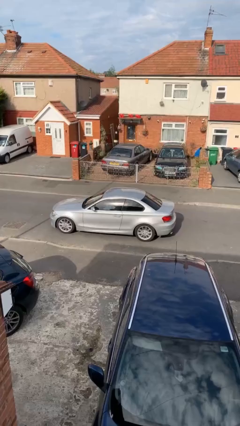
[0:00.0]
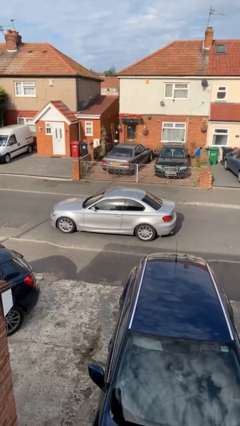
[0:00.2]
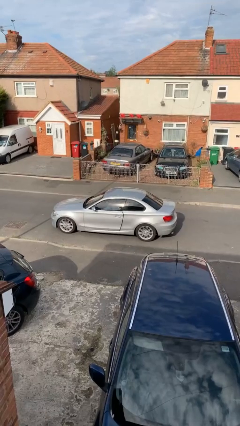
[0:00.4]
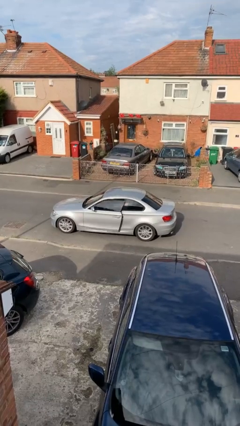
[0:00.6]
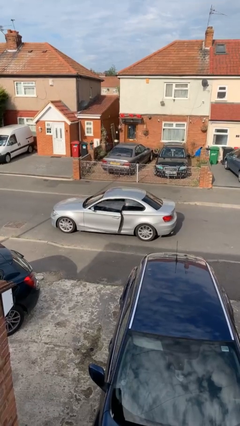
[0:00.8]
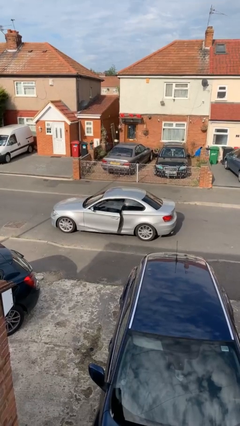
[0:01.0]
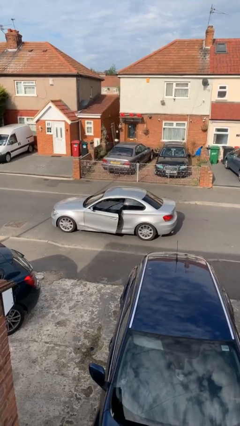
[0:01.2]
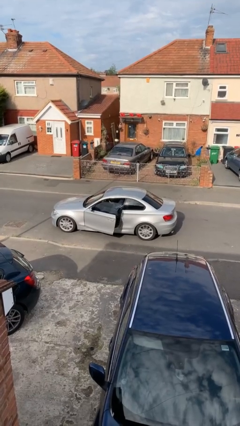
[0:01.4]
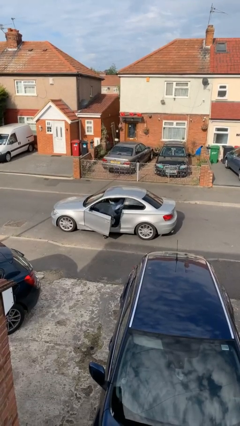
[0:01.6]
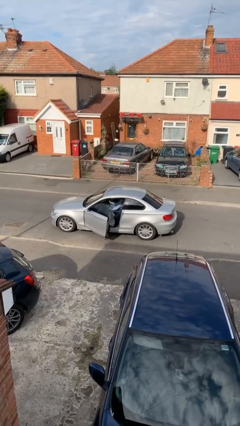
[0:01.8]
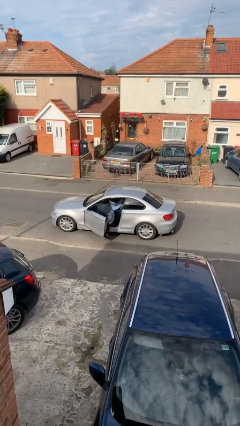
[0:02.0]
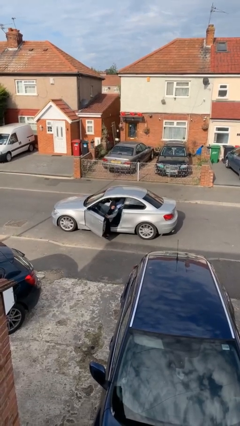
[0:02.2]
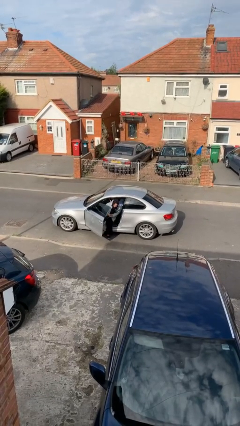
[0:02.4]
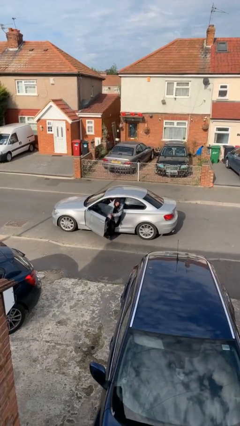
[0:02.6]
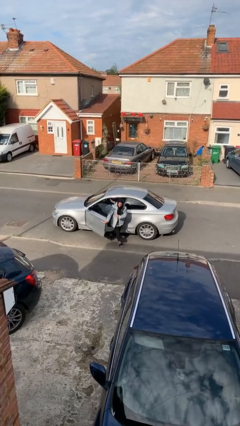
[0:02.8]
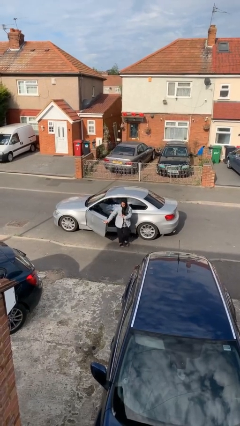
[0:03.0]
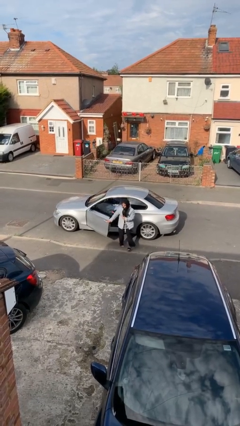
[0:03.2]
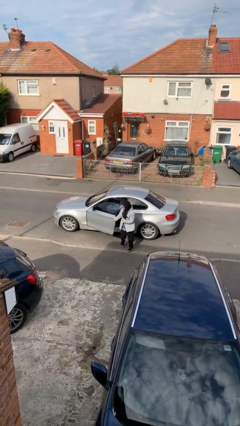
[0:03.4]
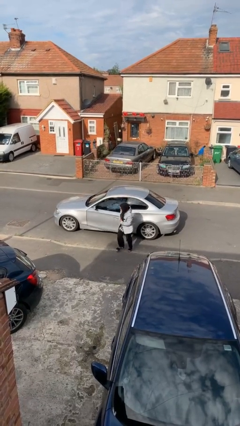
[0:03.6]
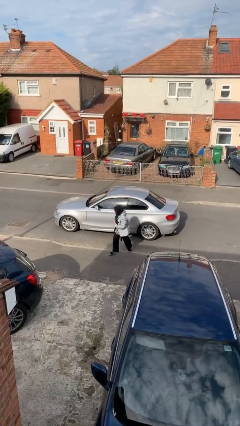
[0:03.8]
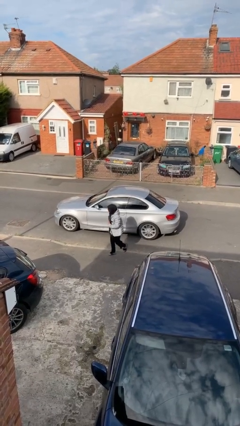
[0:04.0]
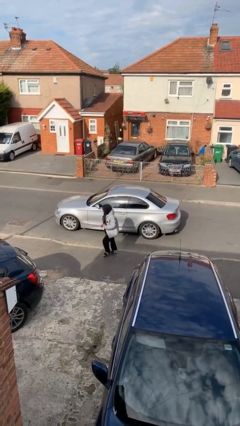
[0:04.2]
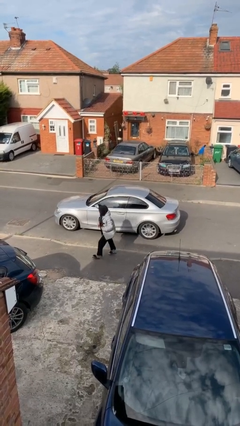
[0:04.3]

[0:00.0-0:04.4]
car drops off person

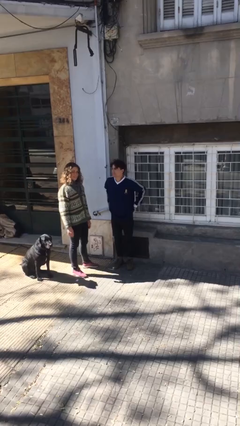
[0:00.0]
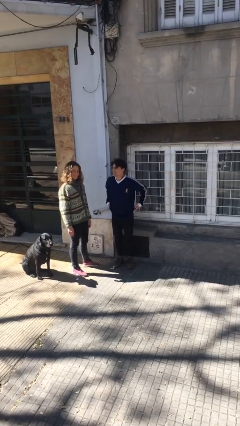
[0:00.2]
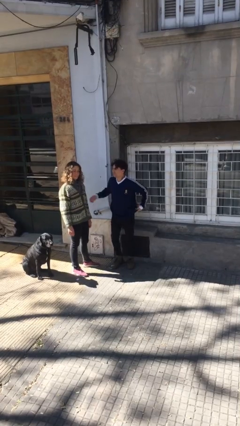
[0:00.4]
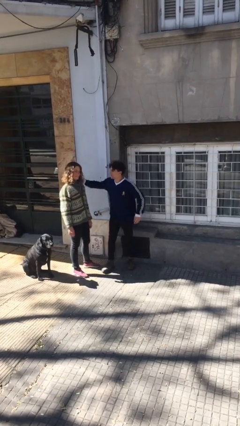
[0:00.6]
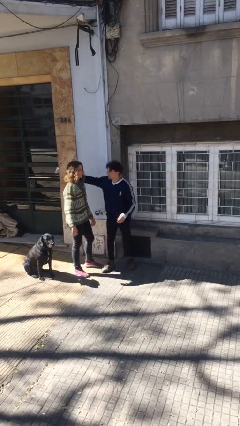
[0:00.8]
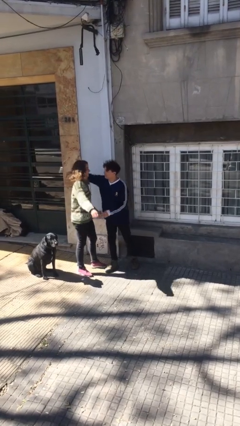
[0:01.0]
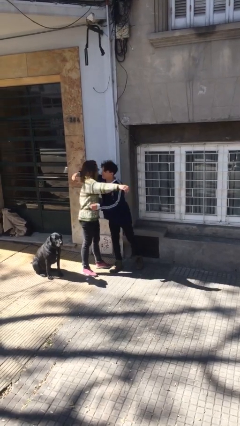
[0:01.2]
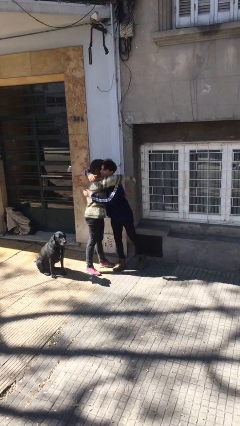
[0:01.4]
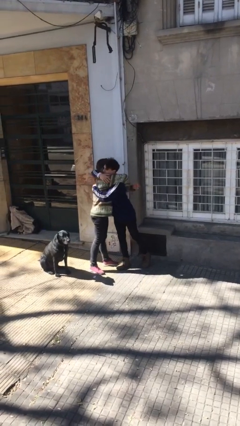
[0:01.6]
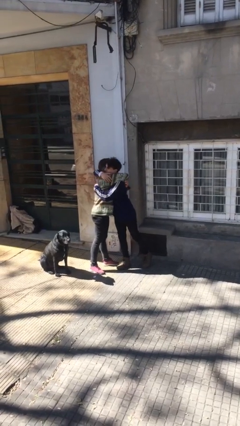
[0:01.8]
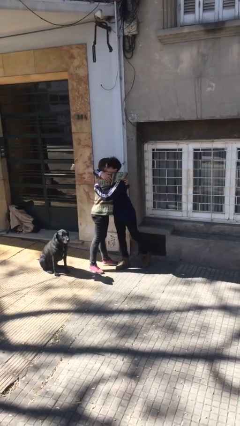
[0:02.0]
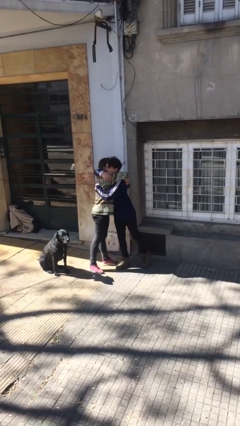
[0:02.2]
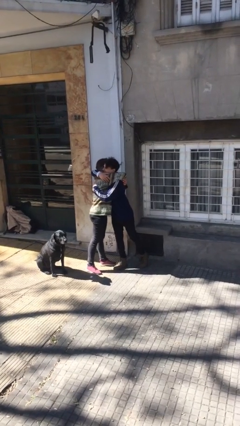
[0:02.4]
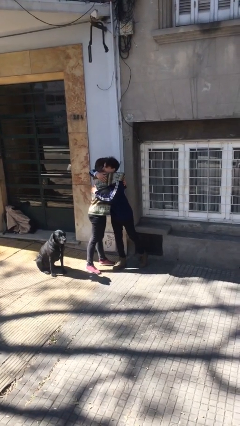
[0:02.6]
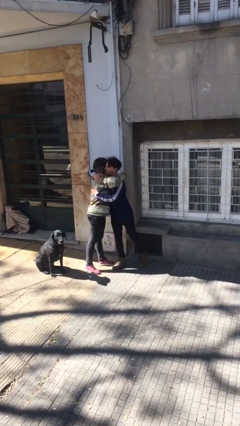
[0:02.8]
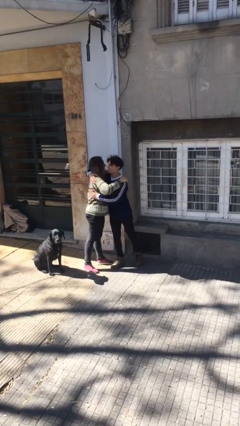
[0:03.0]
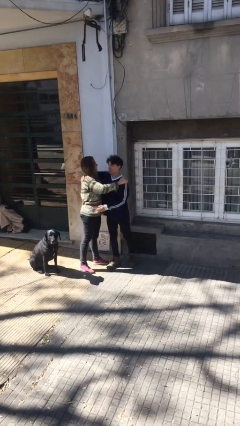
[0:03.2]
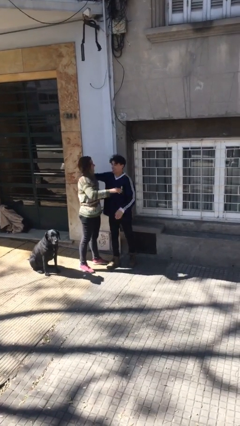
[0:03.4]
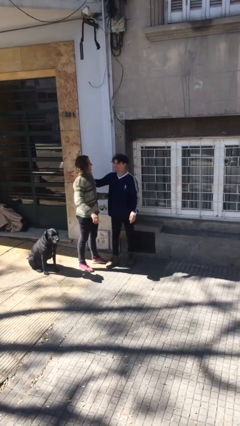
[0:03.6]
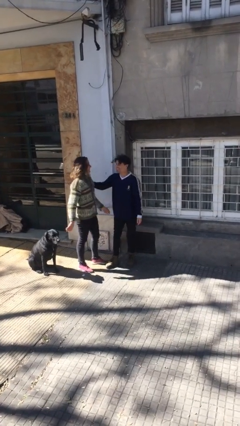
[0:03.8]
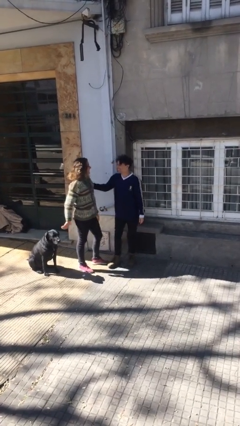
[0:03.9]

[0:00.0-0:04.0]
person embraces person

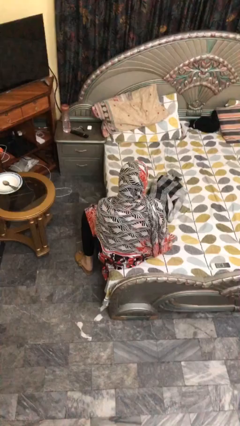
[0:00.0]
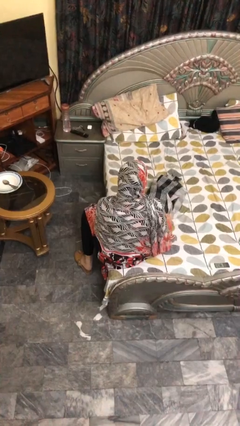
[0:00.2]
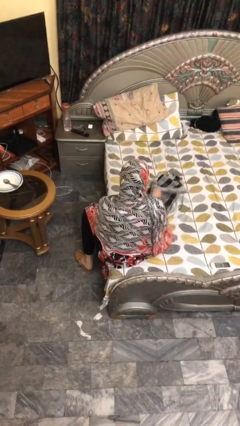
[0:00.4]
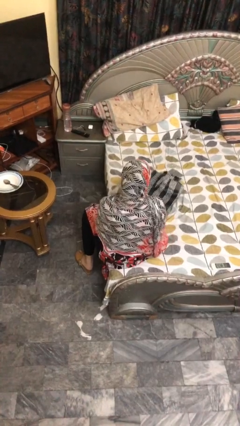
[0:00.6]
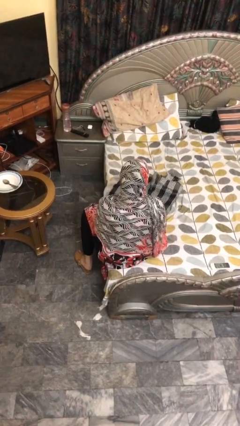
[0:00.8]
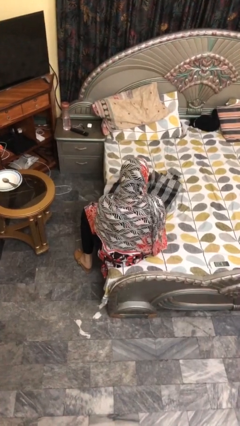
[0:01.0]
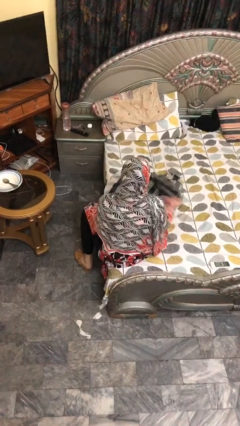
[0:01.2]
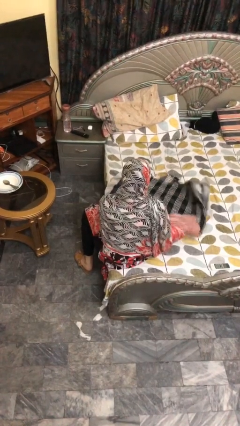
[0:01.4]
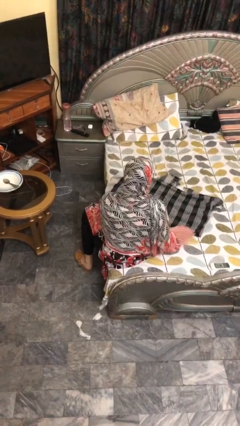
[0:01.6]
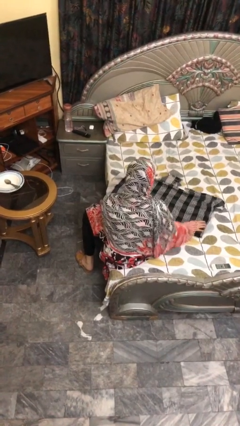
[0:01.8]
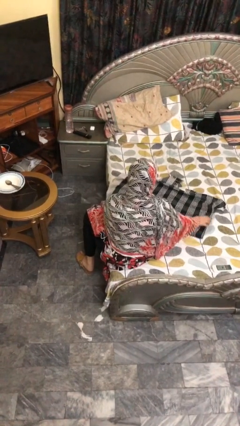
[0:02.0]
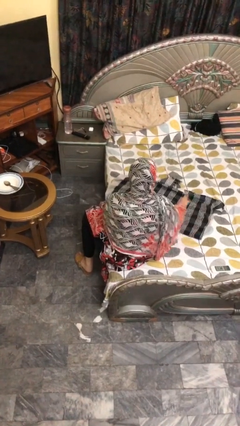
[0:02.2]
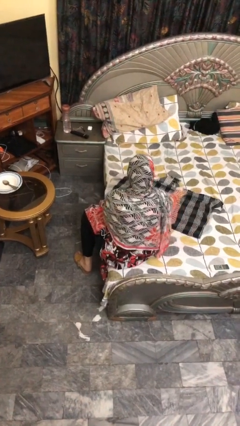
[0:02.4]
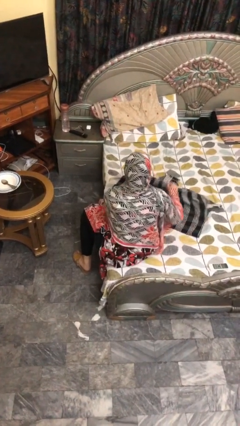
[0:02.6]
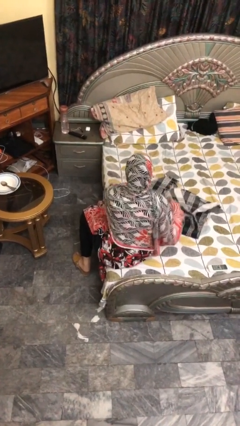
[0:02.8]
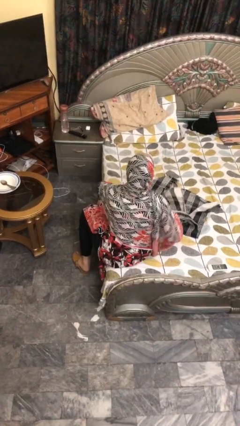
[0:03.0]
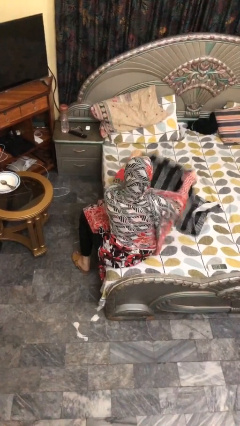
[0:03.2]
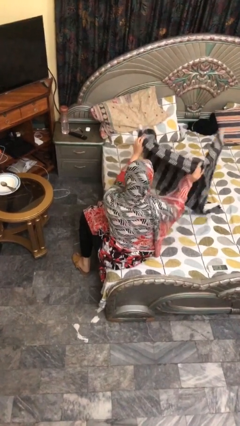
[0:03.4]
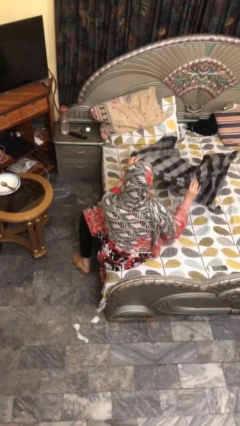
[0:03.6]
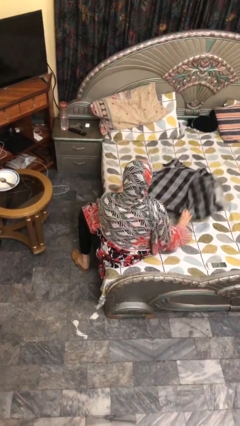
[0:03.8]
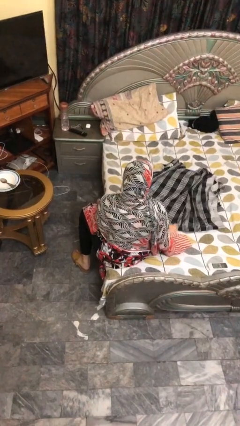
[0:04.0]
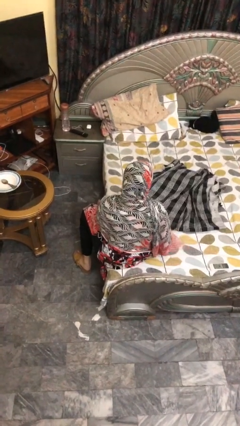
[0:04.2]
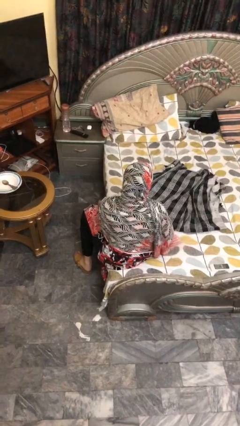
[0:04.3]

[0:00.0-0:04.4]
person unfolds blanket

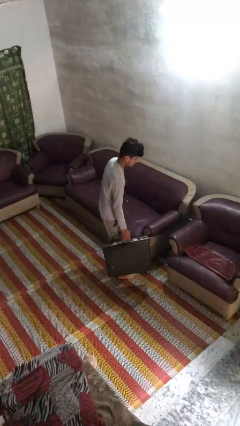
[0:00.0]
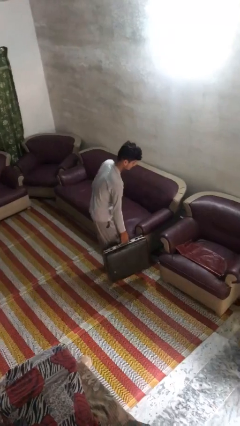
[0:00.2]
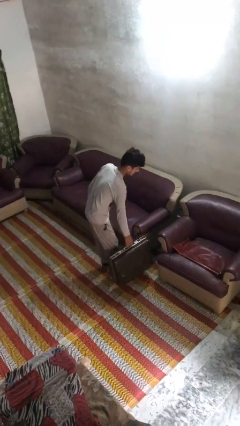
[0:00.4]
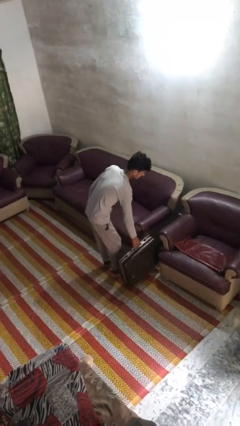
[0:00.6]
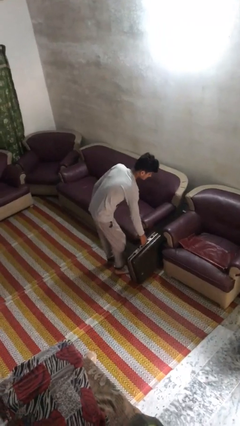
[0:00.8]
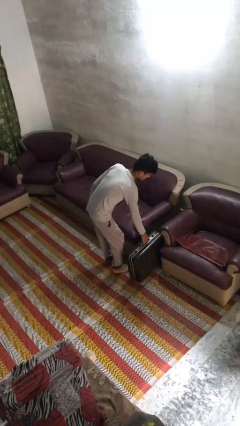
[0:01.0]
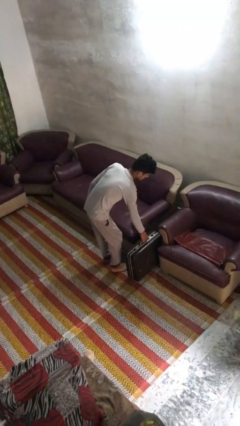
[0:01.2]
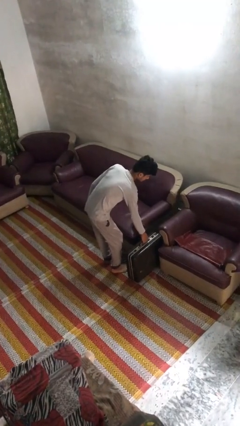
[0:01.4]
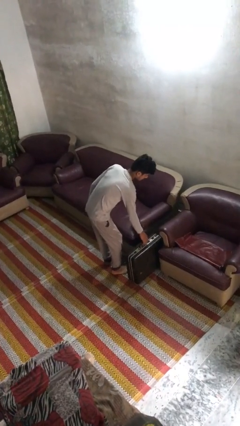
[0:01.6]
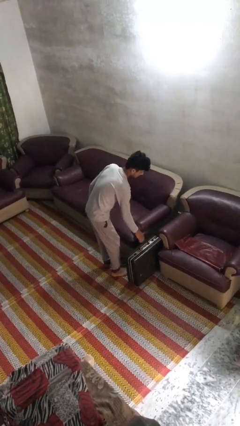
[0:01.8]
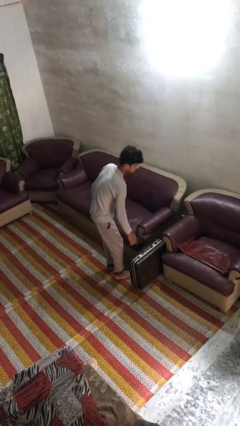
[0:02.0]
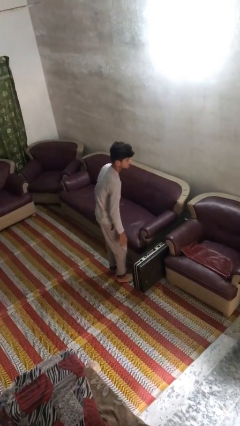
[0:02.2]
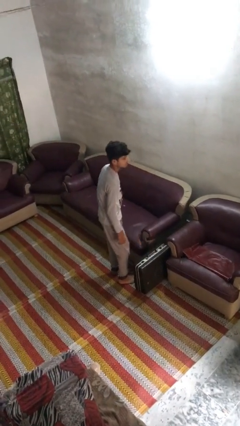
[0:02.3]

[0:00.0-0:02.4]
person puts down object on floor

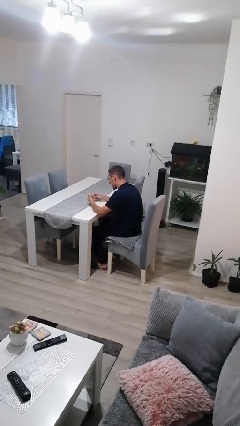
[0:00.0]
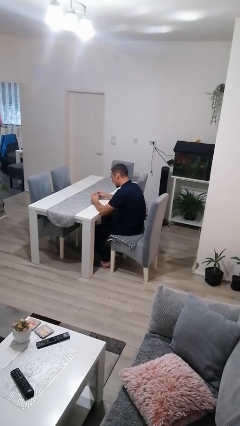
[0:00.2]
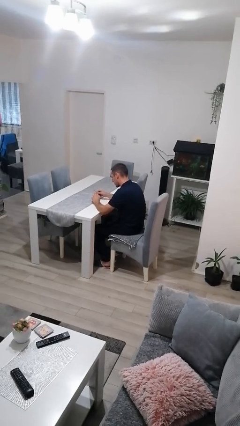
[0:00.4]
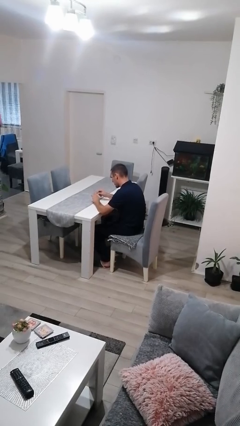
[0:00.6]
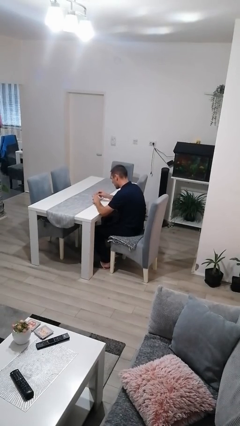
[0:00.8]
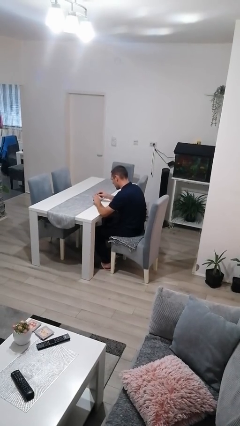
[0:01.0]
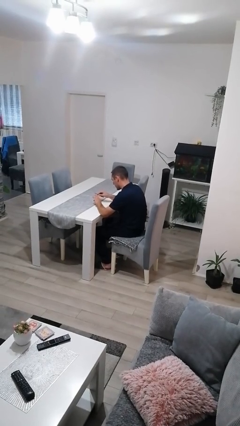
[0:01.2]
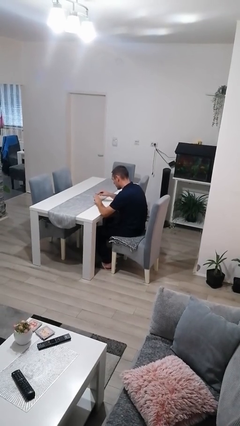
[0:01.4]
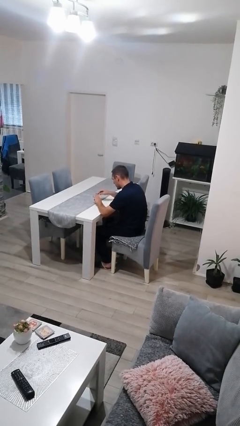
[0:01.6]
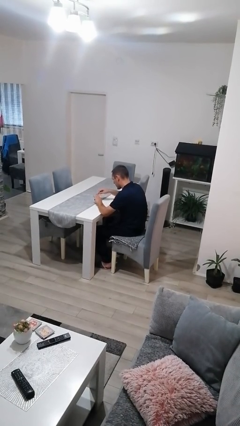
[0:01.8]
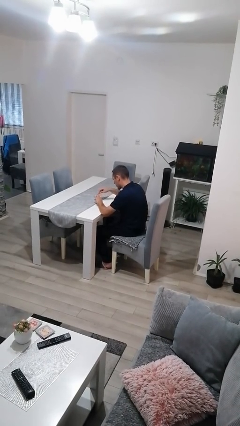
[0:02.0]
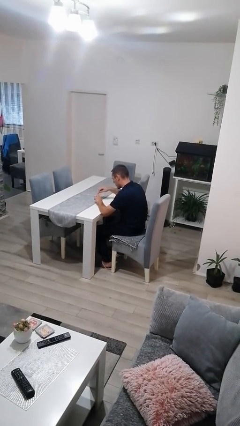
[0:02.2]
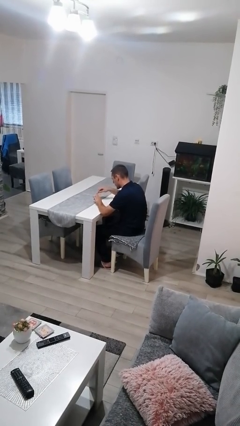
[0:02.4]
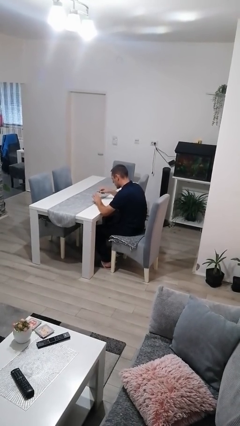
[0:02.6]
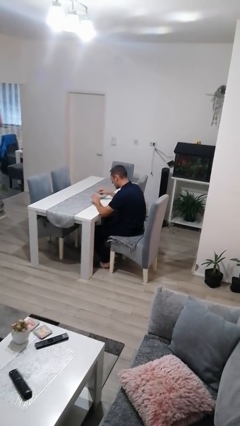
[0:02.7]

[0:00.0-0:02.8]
person files fingernails
